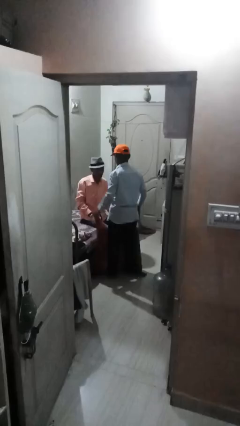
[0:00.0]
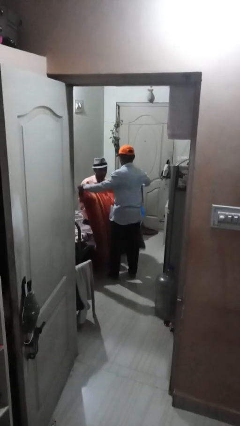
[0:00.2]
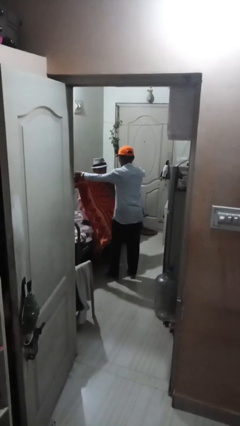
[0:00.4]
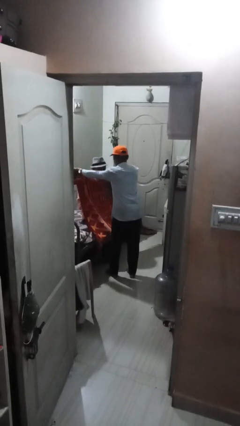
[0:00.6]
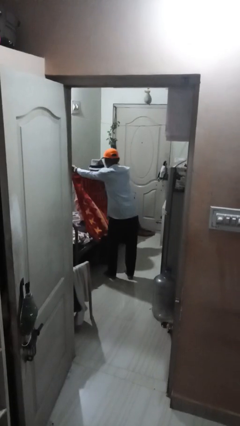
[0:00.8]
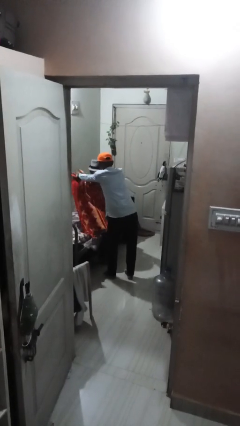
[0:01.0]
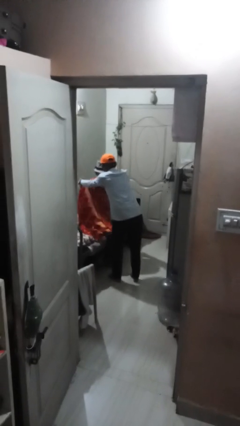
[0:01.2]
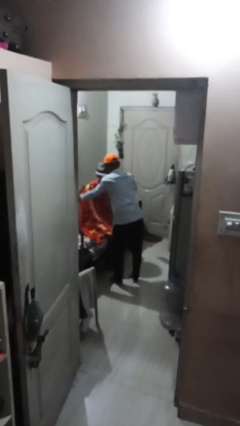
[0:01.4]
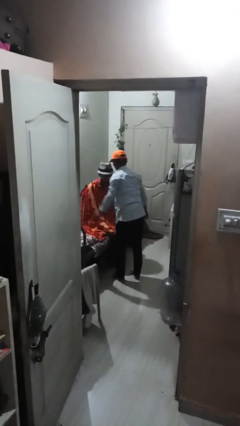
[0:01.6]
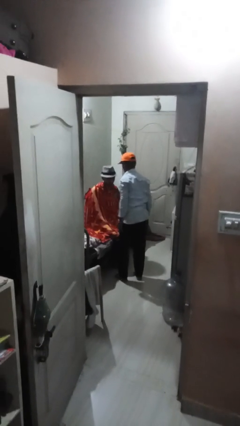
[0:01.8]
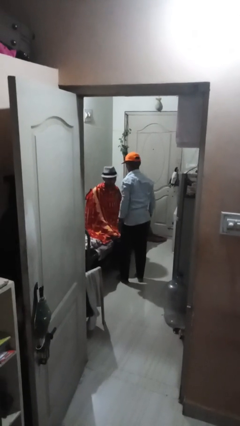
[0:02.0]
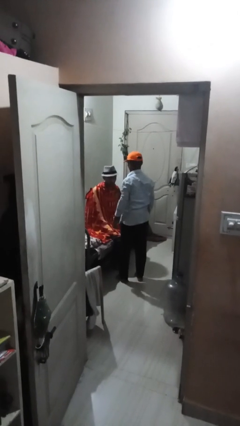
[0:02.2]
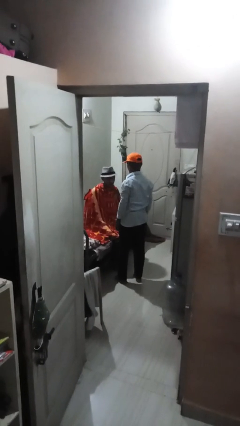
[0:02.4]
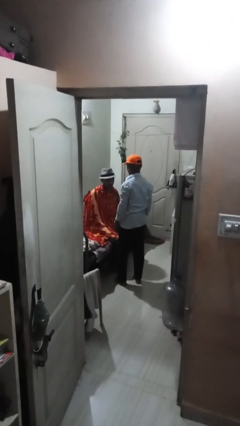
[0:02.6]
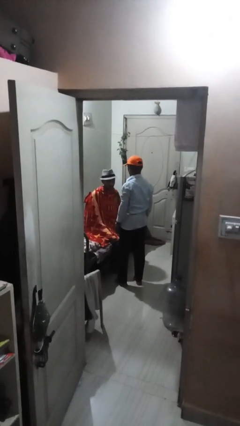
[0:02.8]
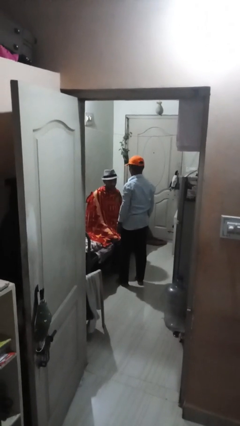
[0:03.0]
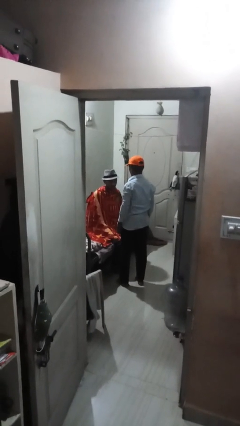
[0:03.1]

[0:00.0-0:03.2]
person covers friend with blanket

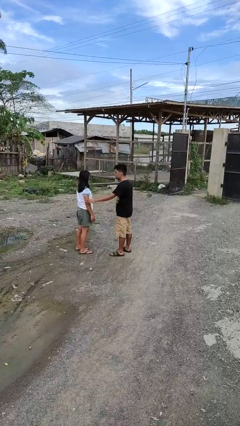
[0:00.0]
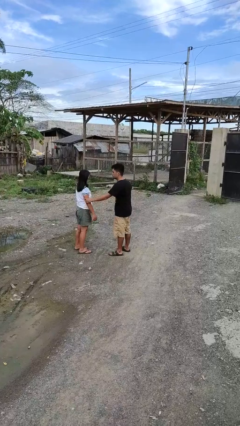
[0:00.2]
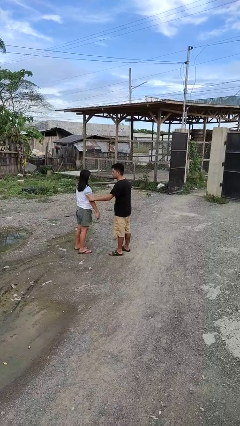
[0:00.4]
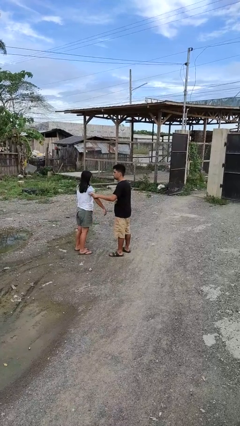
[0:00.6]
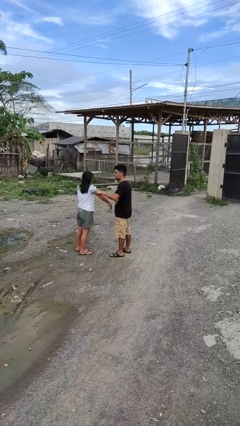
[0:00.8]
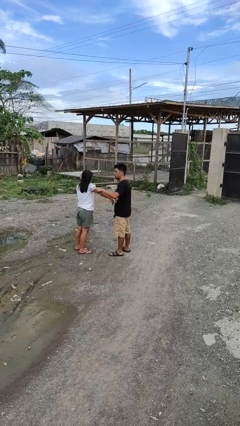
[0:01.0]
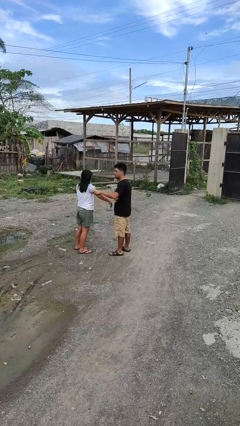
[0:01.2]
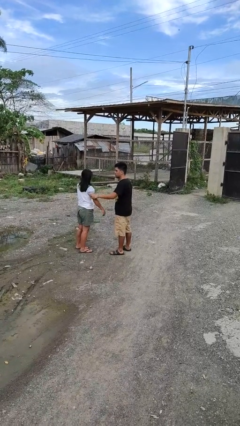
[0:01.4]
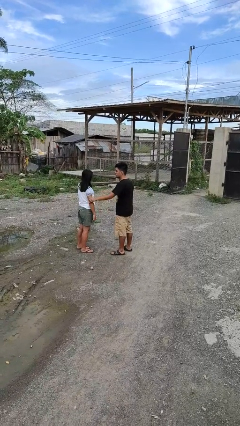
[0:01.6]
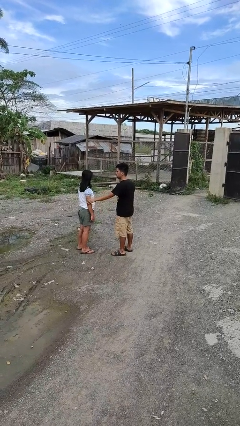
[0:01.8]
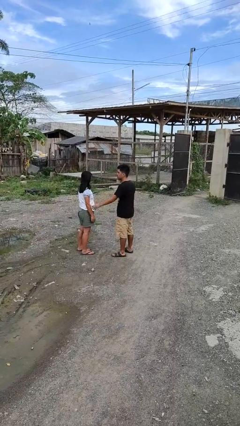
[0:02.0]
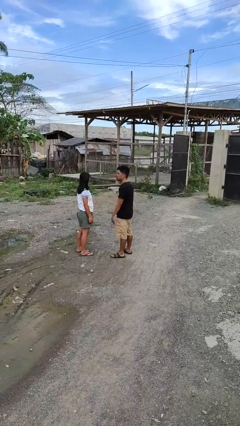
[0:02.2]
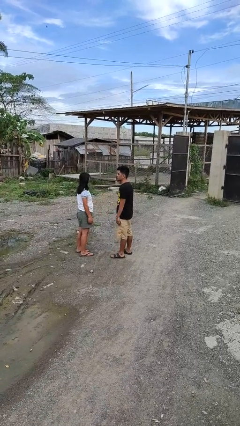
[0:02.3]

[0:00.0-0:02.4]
person grabs person by bicep

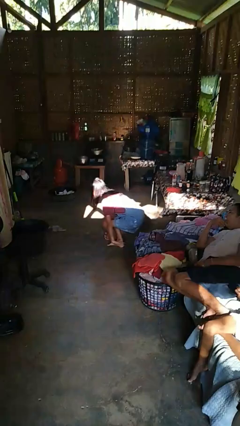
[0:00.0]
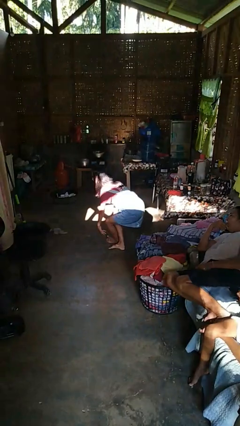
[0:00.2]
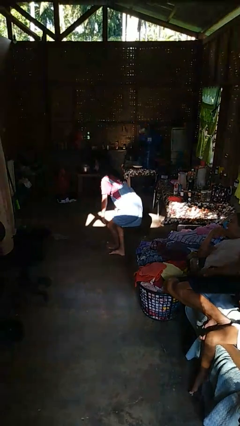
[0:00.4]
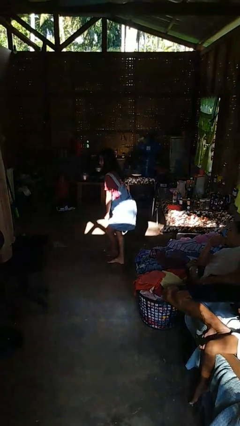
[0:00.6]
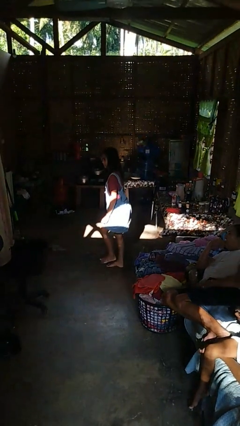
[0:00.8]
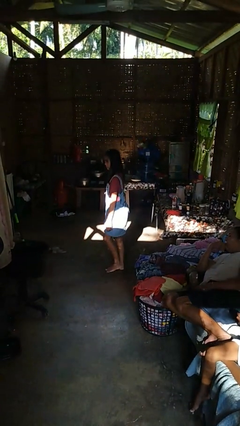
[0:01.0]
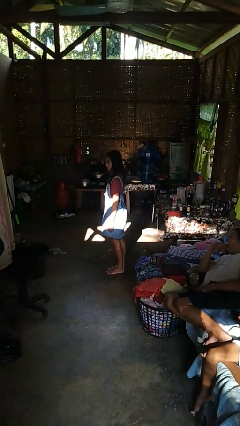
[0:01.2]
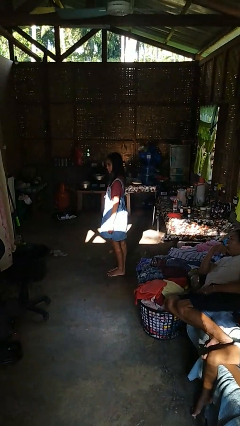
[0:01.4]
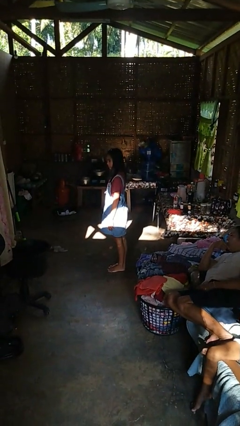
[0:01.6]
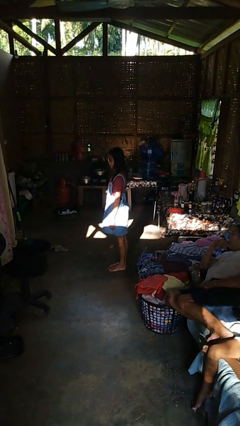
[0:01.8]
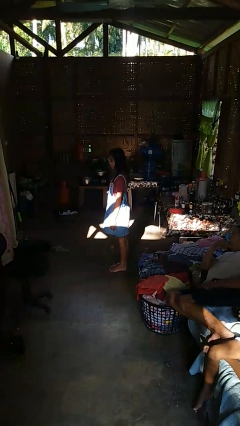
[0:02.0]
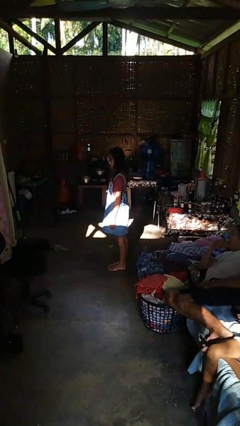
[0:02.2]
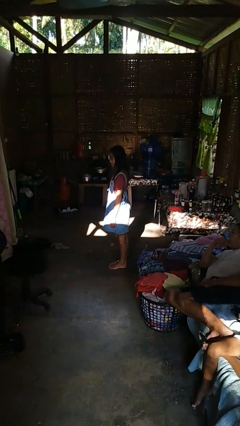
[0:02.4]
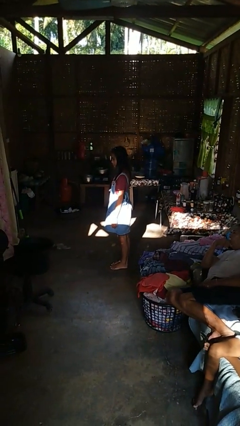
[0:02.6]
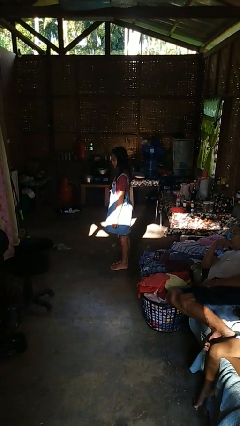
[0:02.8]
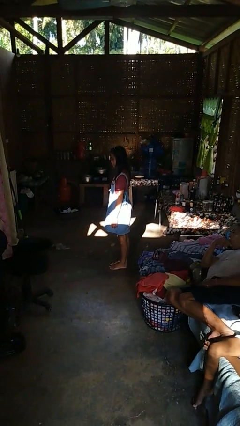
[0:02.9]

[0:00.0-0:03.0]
person stands up from floor

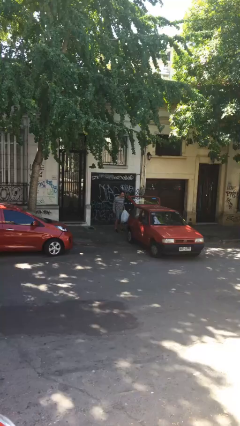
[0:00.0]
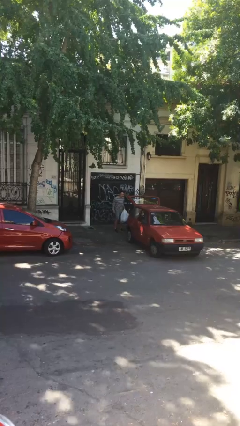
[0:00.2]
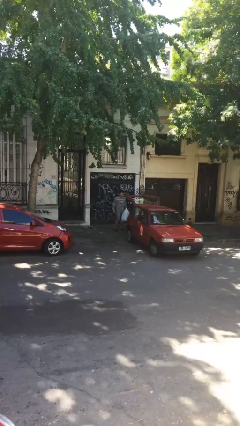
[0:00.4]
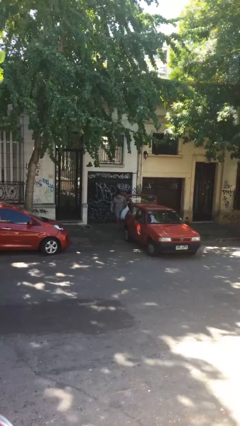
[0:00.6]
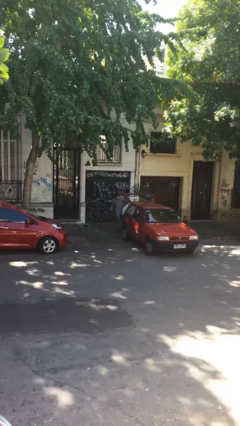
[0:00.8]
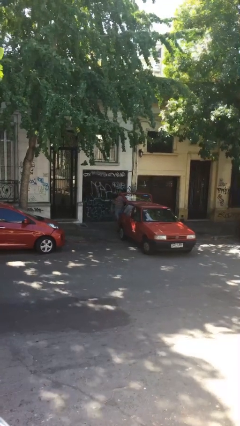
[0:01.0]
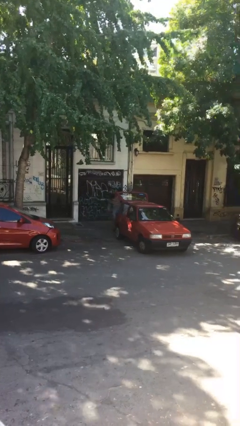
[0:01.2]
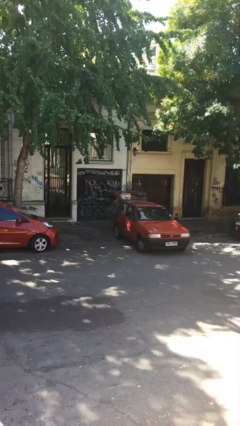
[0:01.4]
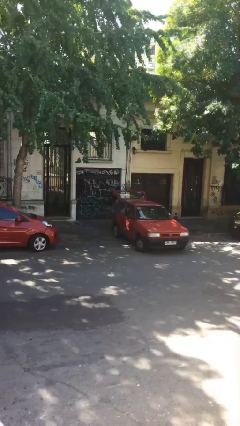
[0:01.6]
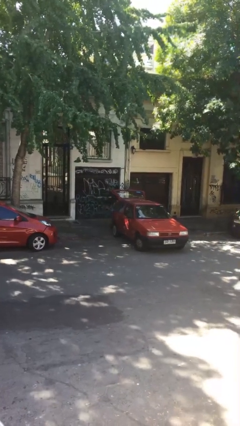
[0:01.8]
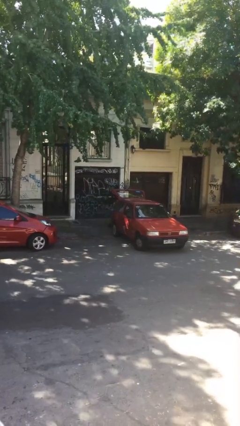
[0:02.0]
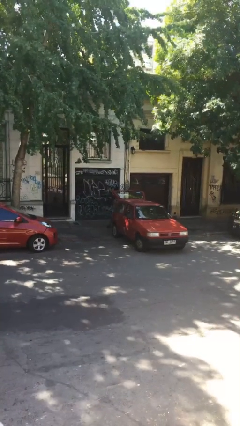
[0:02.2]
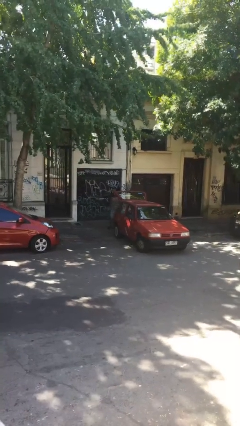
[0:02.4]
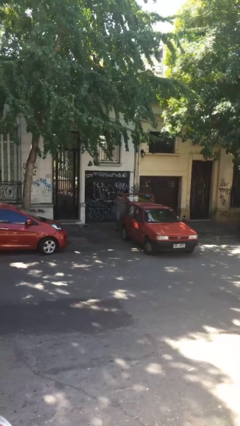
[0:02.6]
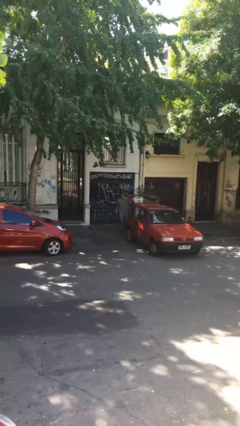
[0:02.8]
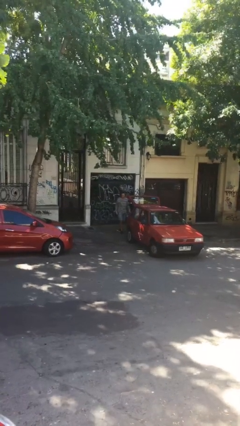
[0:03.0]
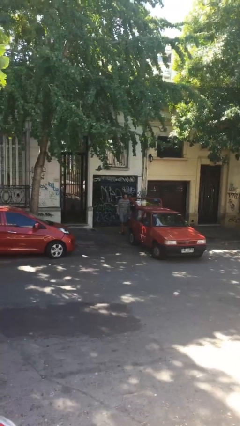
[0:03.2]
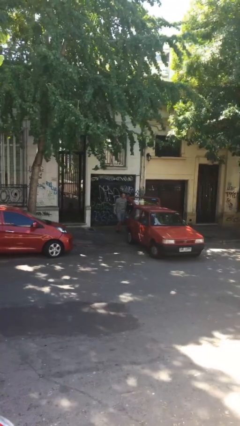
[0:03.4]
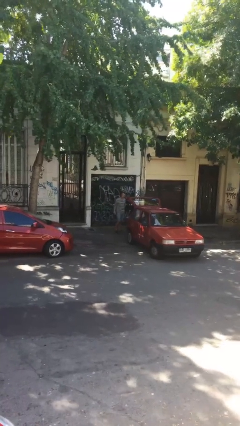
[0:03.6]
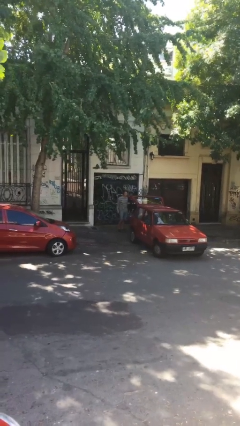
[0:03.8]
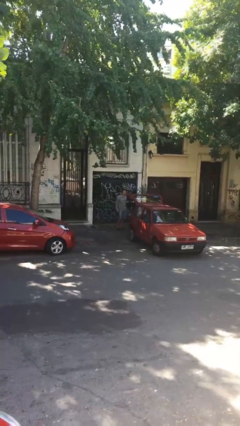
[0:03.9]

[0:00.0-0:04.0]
person loads car

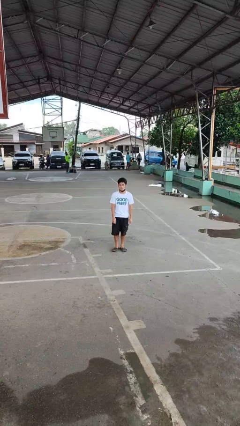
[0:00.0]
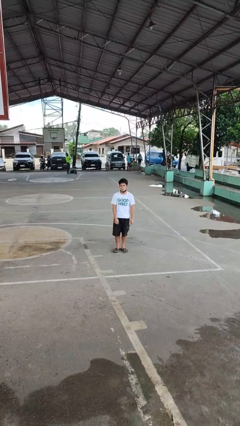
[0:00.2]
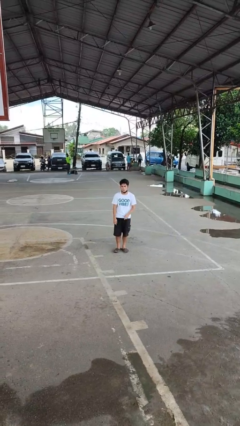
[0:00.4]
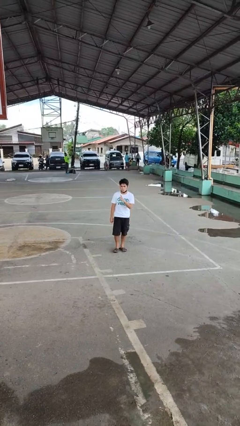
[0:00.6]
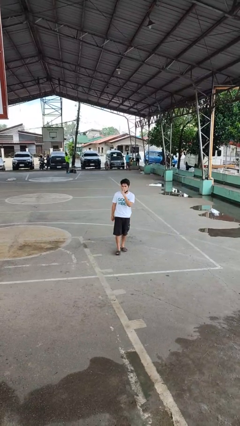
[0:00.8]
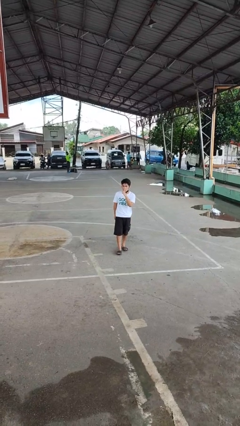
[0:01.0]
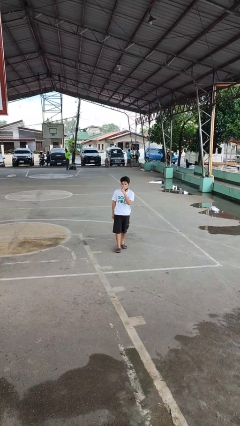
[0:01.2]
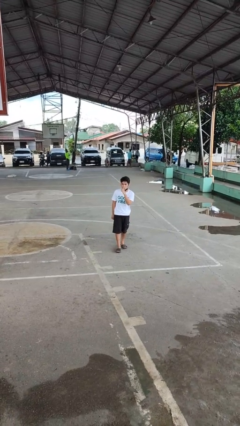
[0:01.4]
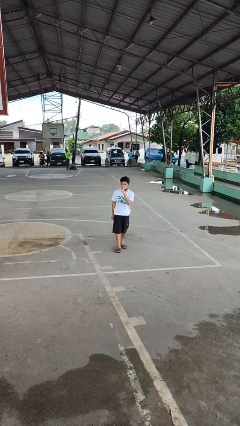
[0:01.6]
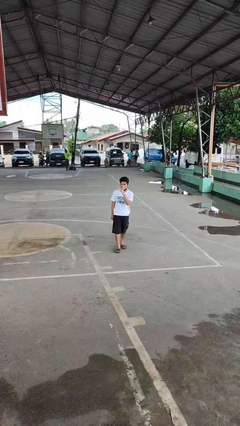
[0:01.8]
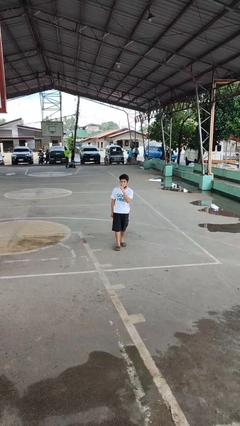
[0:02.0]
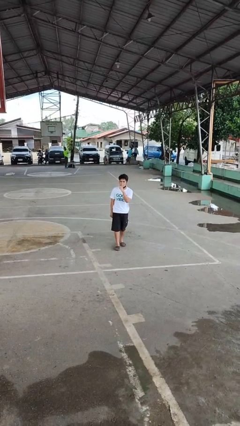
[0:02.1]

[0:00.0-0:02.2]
person gestures be quiet

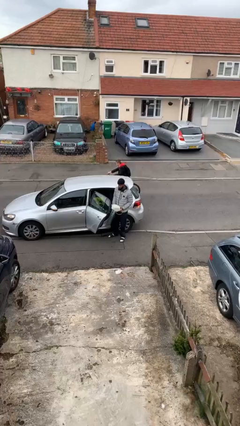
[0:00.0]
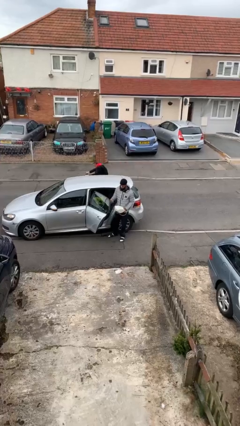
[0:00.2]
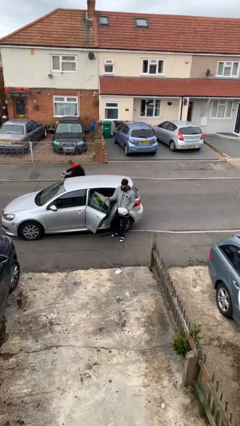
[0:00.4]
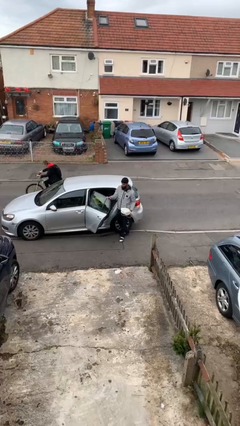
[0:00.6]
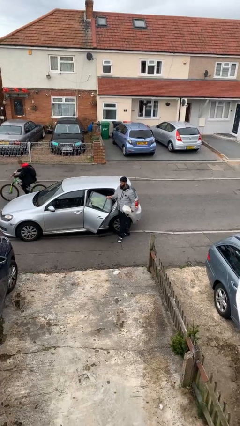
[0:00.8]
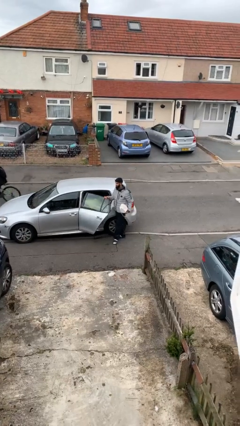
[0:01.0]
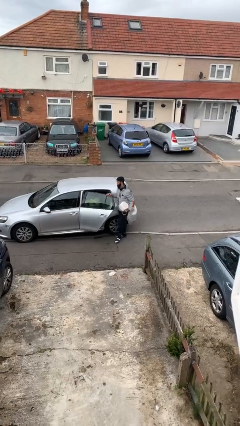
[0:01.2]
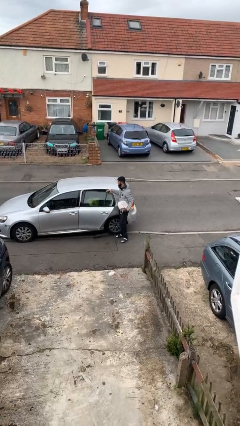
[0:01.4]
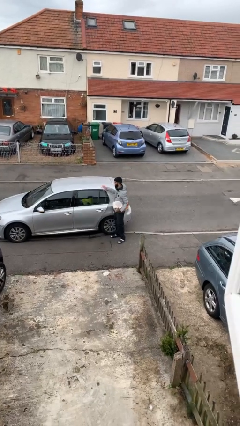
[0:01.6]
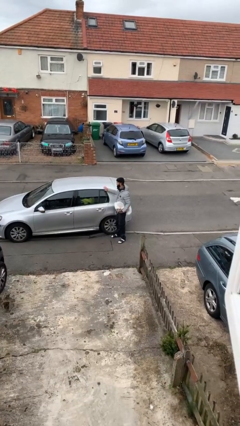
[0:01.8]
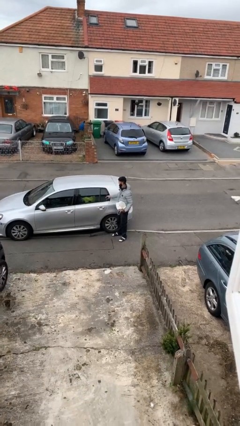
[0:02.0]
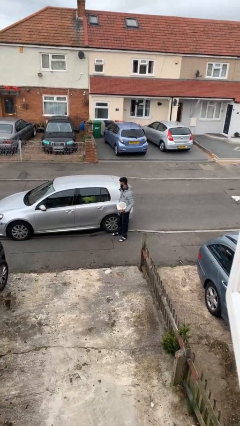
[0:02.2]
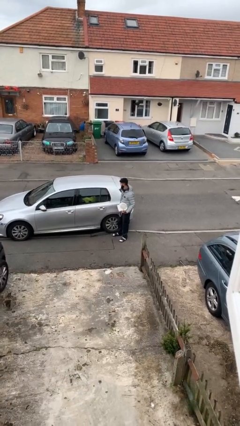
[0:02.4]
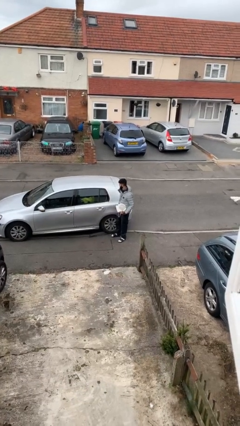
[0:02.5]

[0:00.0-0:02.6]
person closes car door
